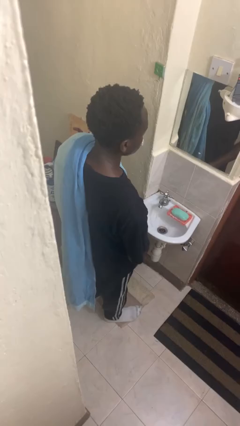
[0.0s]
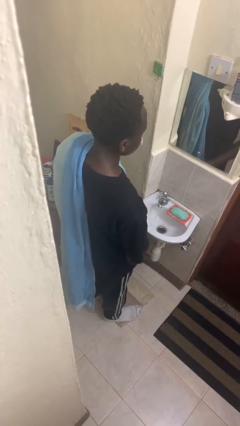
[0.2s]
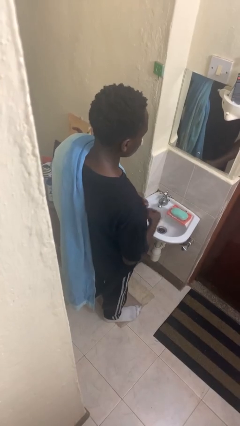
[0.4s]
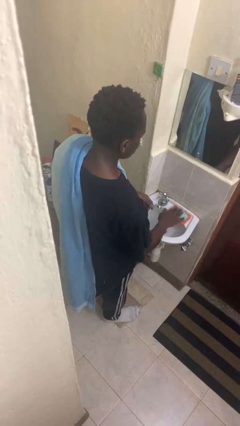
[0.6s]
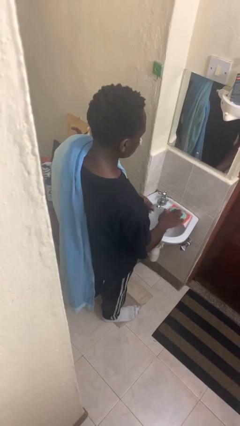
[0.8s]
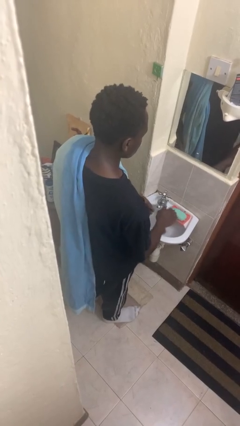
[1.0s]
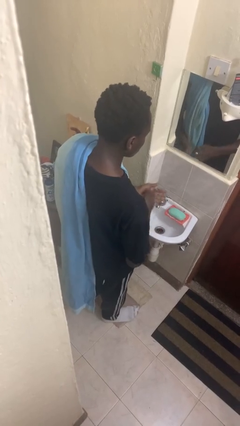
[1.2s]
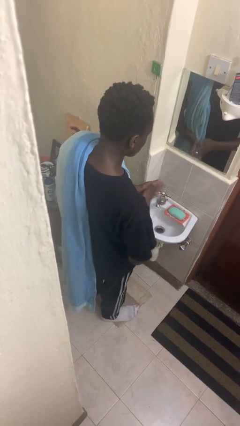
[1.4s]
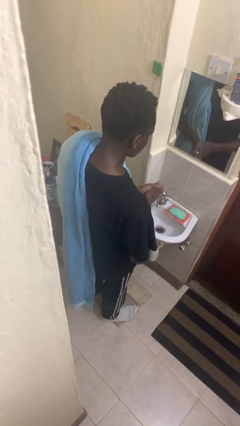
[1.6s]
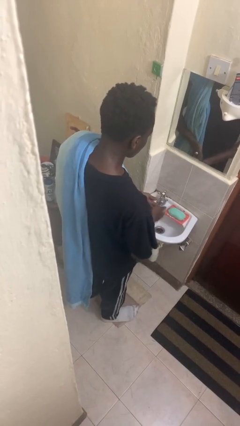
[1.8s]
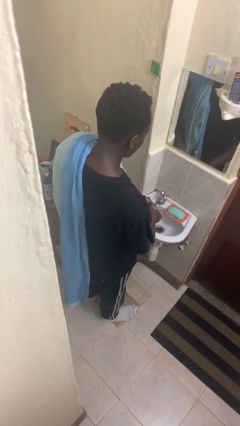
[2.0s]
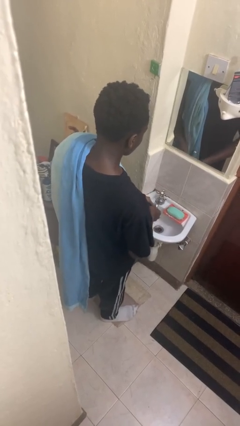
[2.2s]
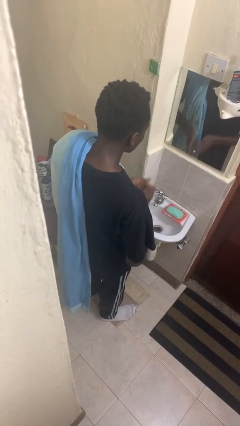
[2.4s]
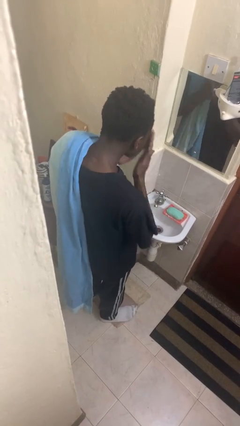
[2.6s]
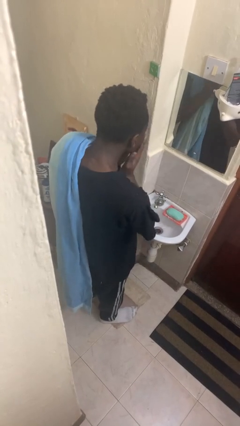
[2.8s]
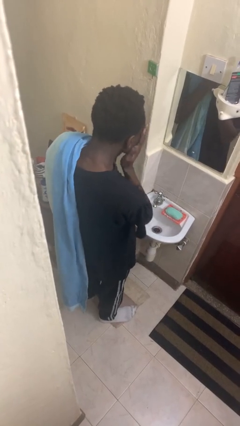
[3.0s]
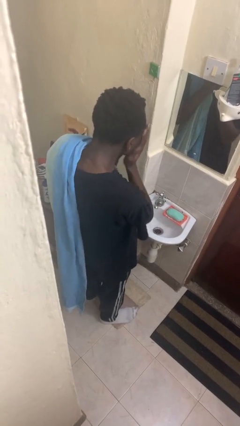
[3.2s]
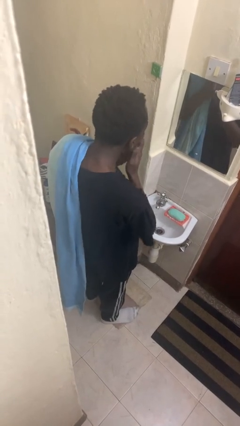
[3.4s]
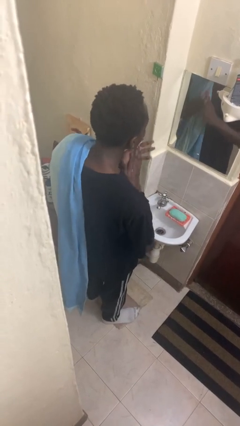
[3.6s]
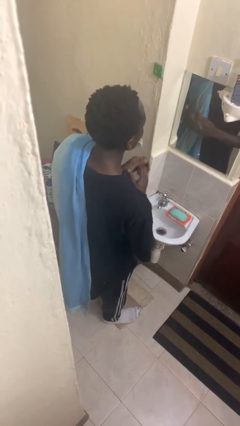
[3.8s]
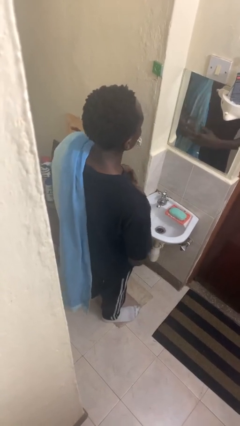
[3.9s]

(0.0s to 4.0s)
person washes face

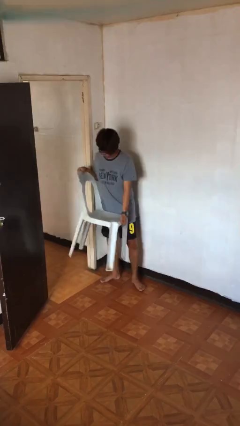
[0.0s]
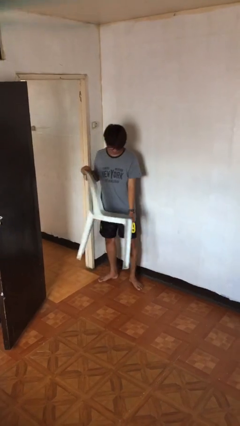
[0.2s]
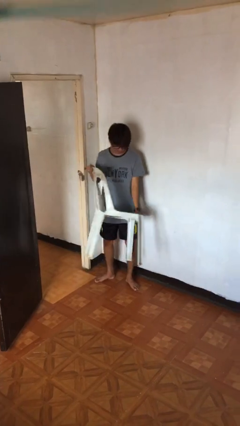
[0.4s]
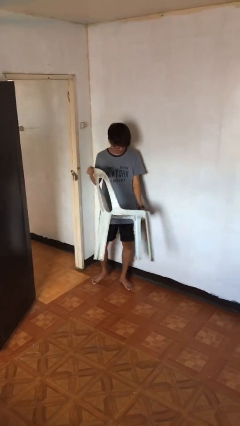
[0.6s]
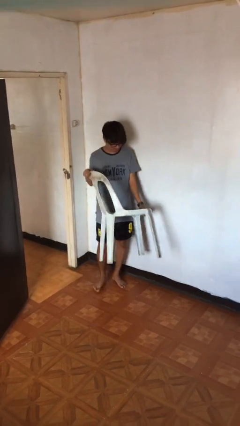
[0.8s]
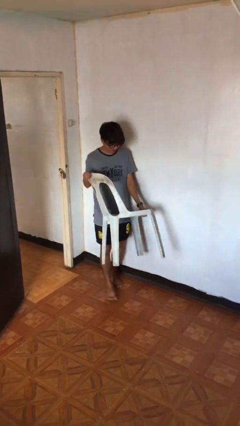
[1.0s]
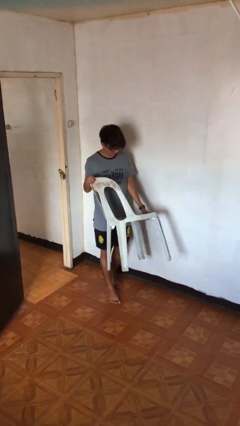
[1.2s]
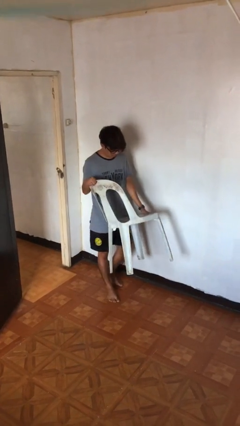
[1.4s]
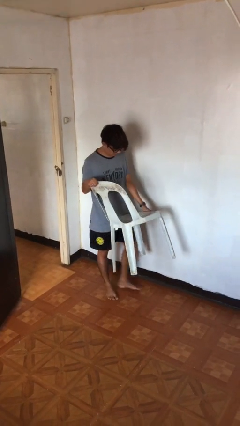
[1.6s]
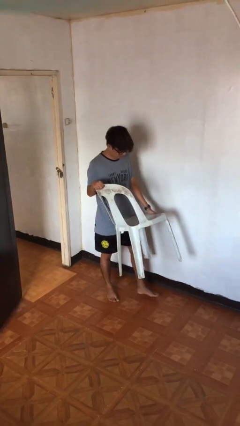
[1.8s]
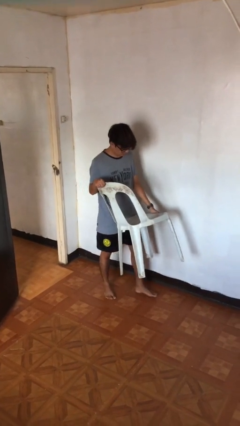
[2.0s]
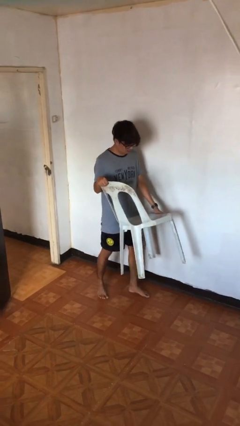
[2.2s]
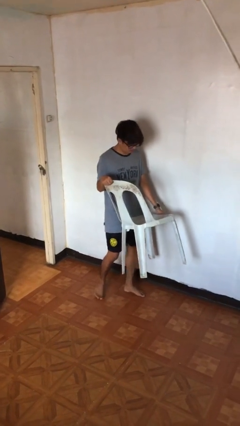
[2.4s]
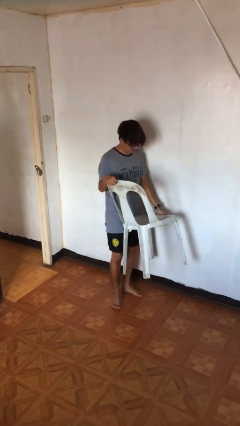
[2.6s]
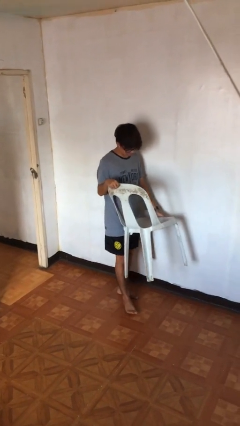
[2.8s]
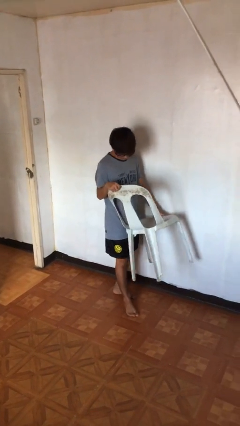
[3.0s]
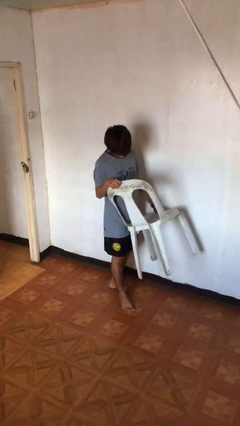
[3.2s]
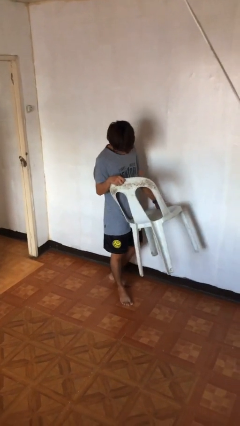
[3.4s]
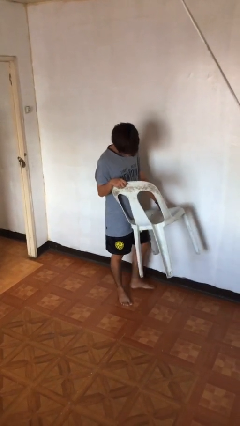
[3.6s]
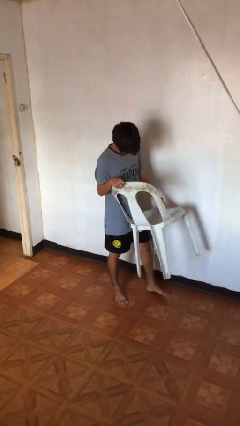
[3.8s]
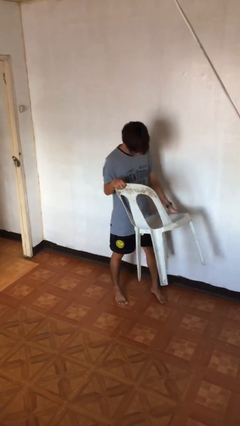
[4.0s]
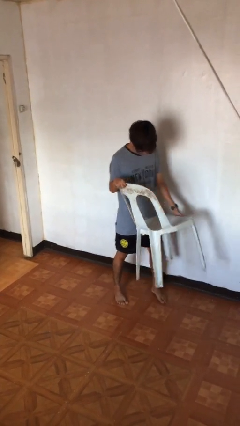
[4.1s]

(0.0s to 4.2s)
person carries heavy object

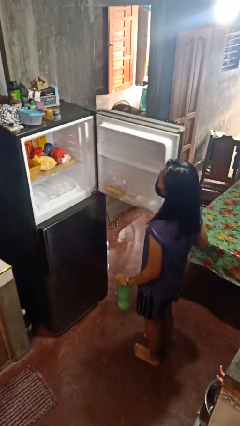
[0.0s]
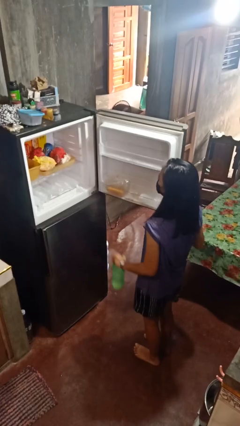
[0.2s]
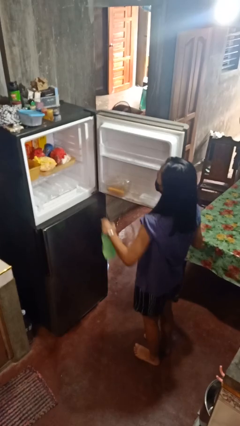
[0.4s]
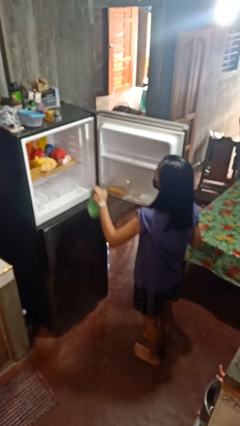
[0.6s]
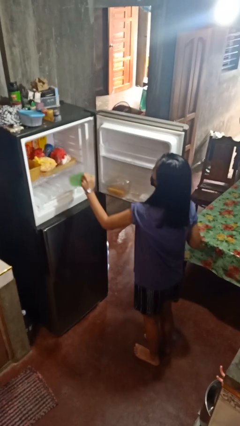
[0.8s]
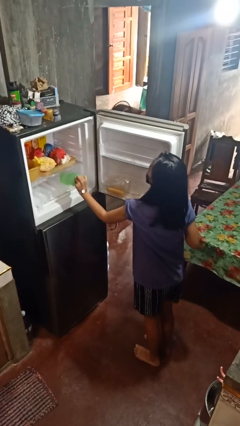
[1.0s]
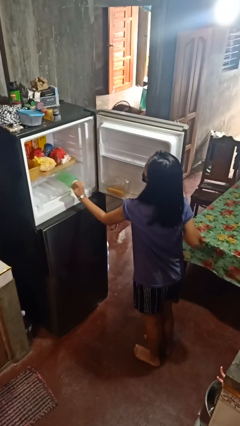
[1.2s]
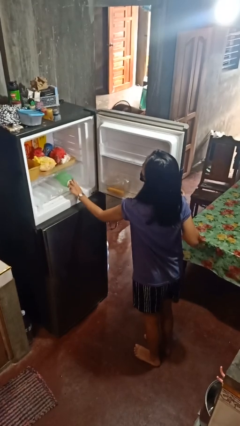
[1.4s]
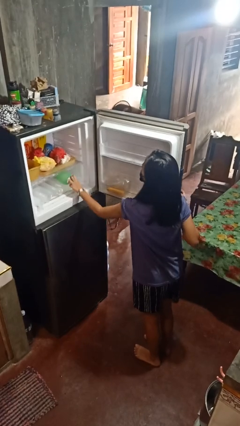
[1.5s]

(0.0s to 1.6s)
person puts object into refrigerator

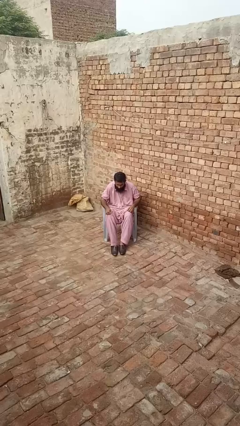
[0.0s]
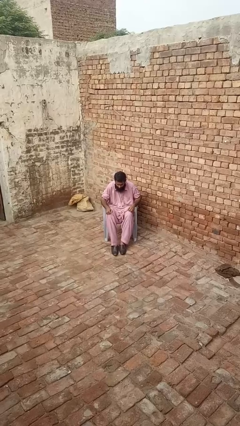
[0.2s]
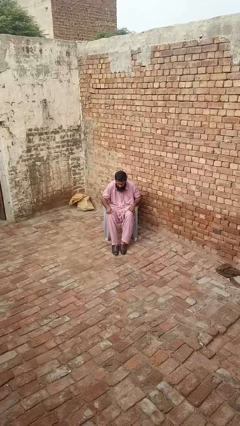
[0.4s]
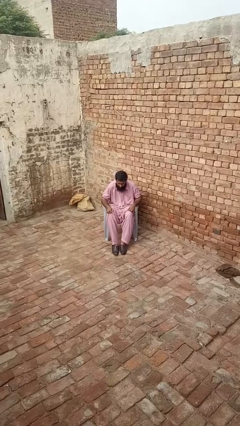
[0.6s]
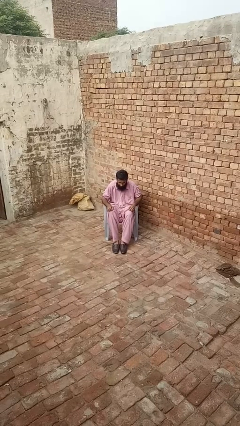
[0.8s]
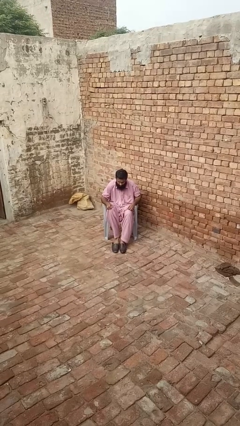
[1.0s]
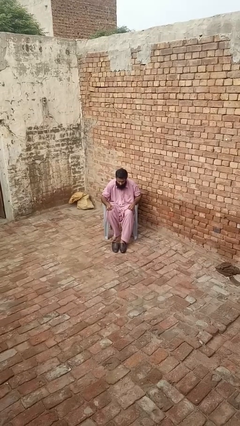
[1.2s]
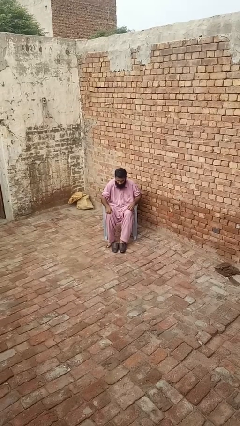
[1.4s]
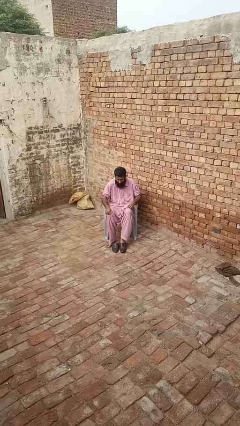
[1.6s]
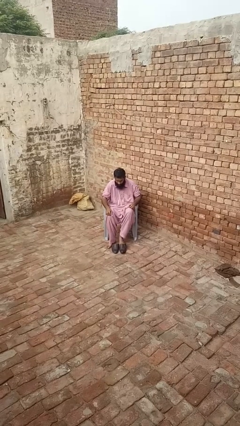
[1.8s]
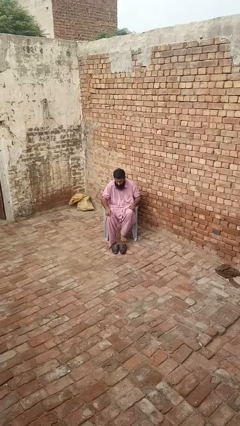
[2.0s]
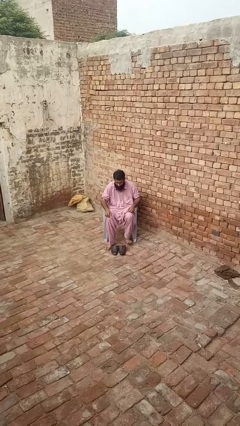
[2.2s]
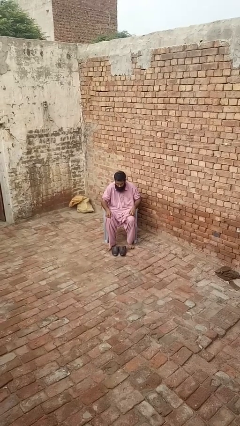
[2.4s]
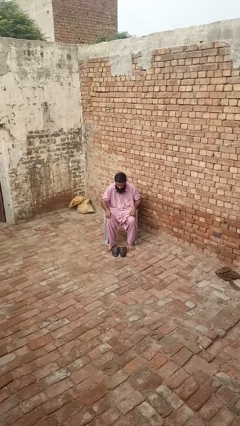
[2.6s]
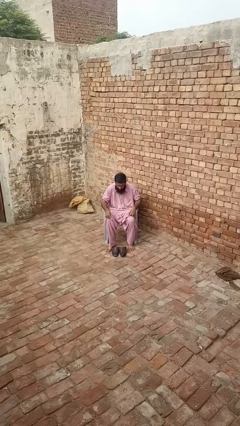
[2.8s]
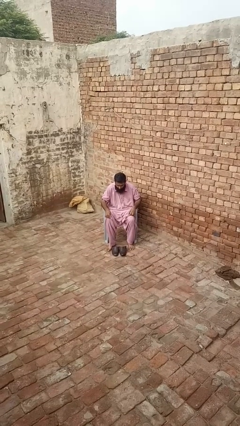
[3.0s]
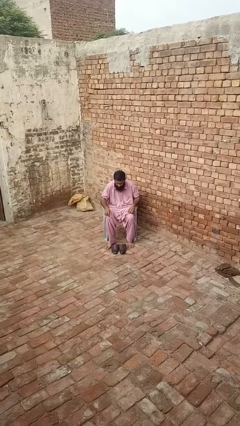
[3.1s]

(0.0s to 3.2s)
person takes off shoes

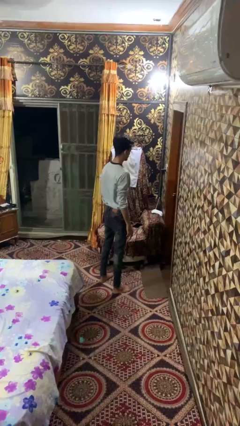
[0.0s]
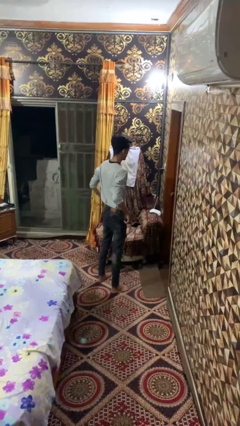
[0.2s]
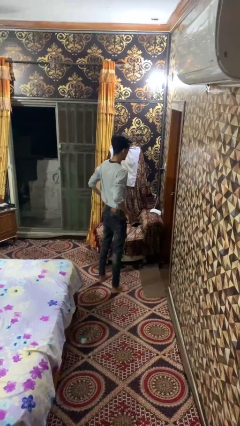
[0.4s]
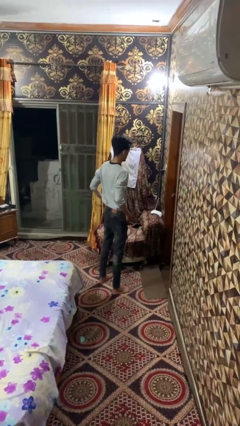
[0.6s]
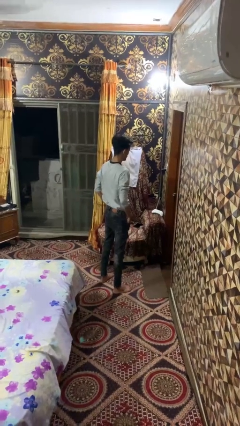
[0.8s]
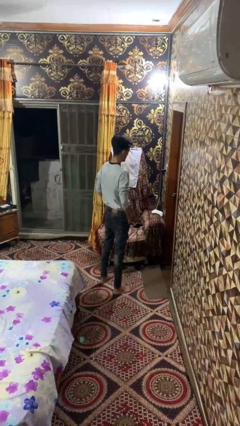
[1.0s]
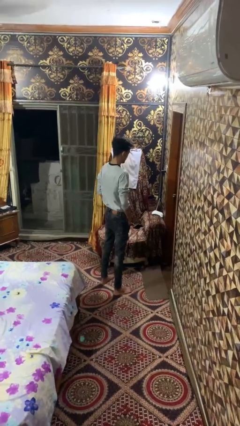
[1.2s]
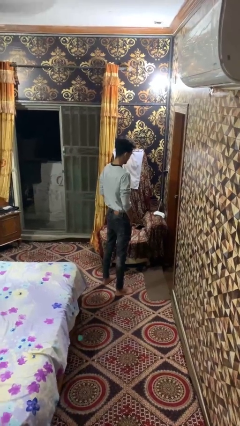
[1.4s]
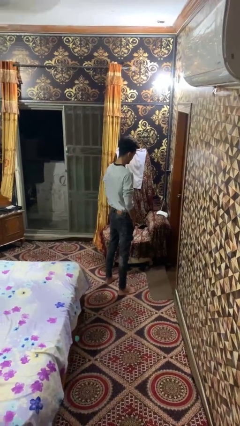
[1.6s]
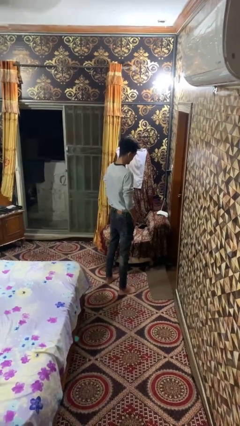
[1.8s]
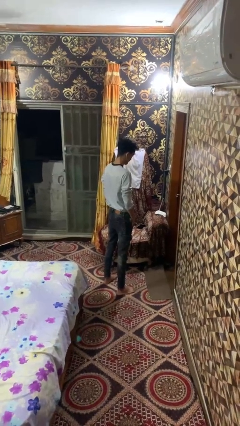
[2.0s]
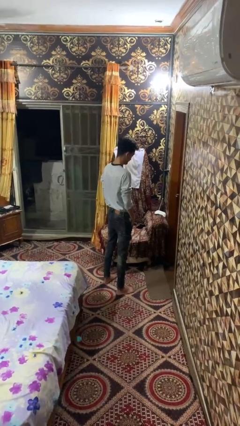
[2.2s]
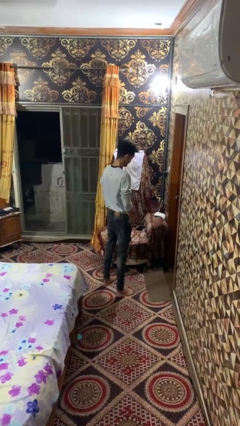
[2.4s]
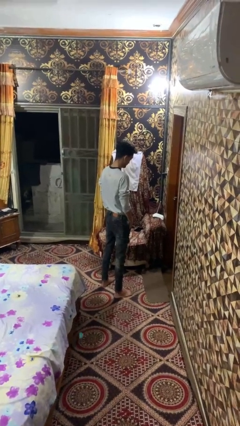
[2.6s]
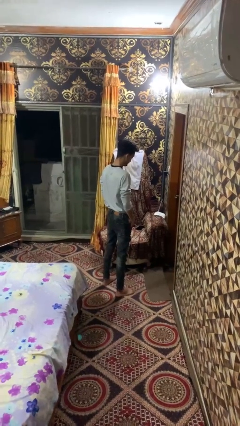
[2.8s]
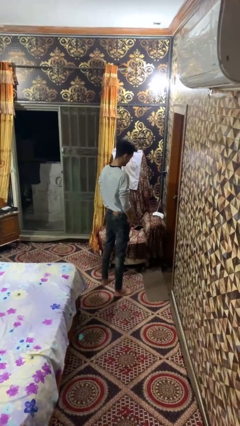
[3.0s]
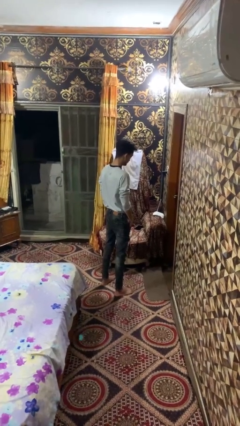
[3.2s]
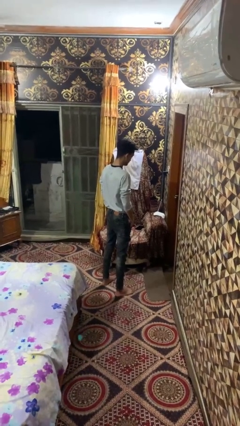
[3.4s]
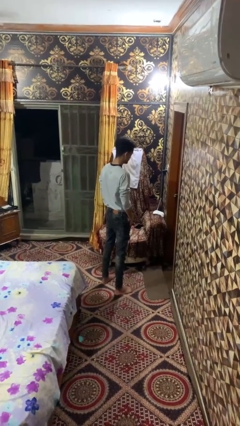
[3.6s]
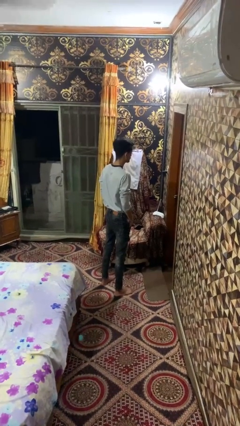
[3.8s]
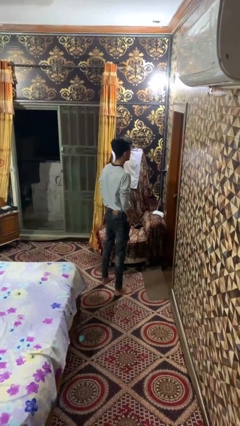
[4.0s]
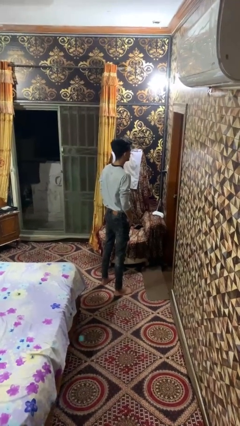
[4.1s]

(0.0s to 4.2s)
person puts hands in back pockets

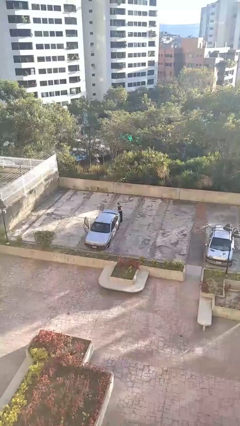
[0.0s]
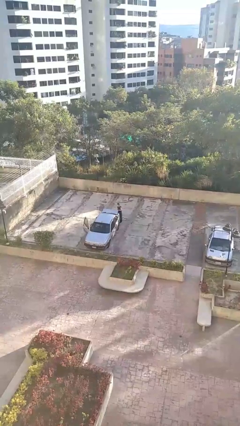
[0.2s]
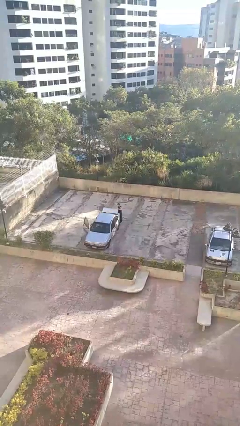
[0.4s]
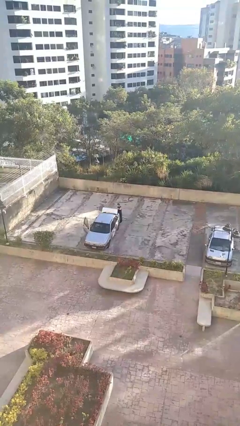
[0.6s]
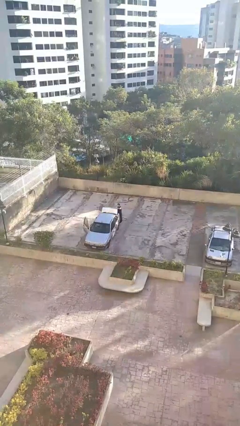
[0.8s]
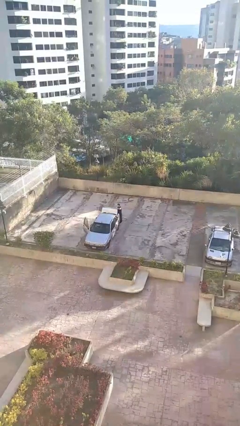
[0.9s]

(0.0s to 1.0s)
person opens car trunk
